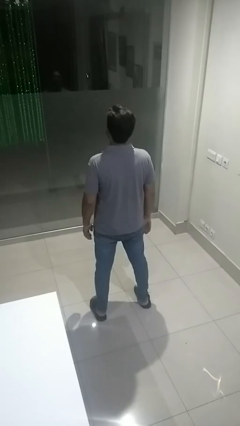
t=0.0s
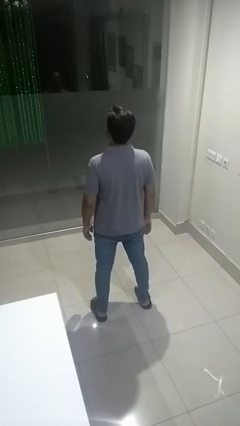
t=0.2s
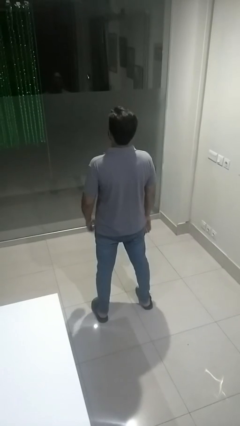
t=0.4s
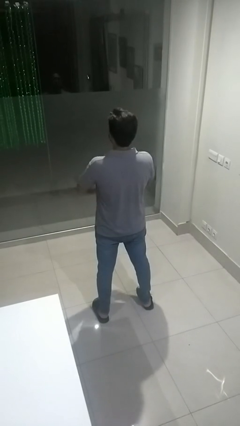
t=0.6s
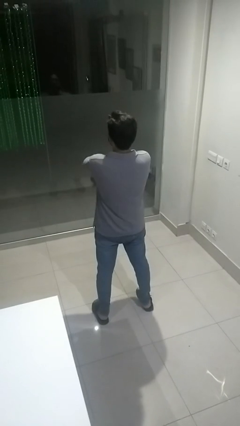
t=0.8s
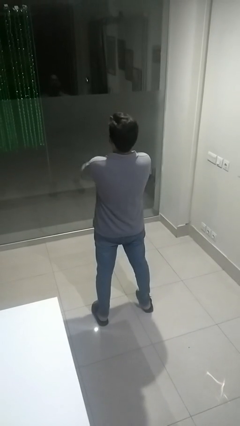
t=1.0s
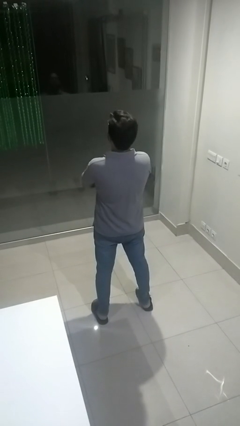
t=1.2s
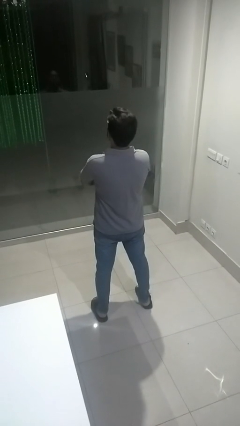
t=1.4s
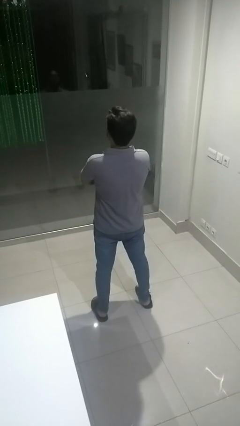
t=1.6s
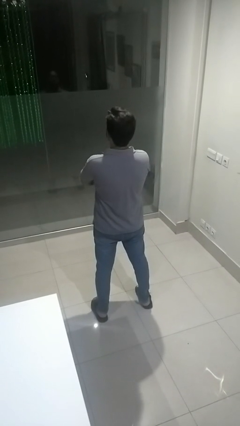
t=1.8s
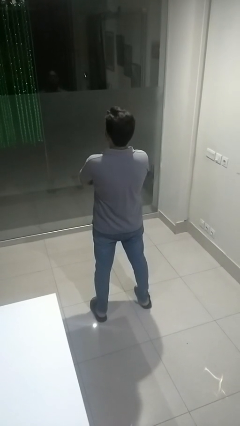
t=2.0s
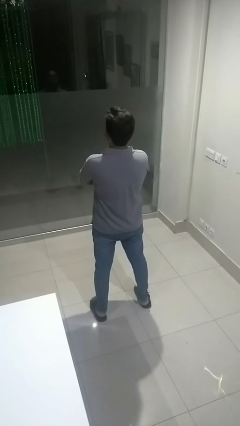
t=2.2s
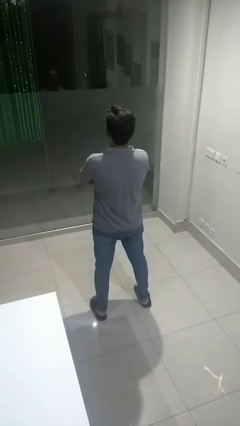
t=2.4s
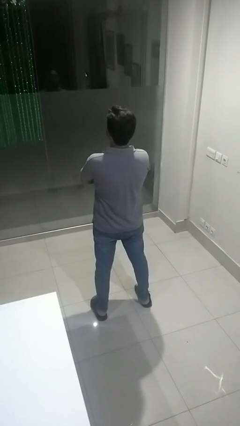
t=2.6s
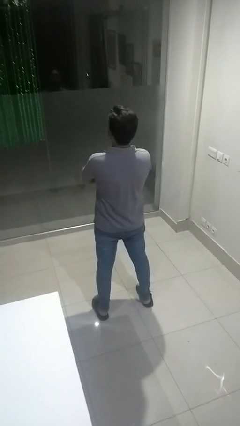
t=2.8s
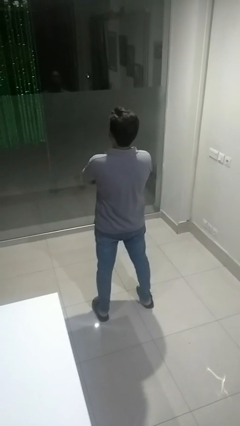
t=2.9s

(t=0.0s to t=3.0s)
person crosses arms

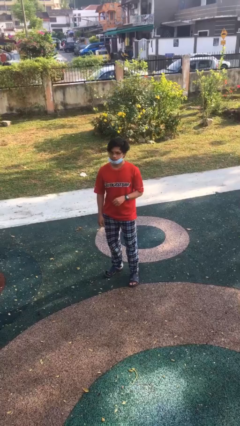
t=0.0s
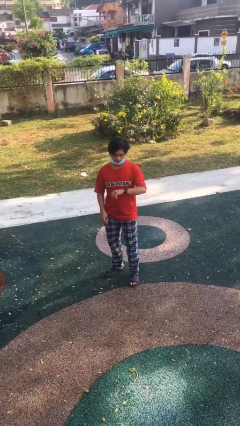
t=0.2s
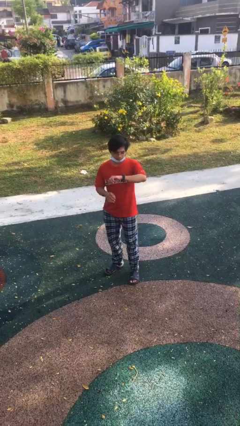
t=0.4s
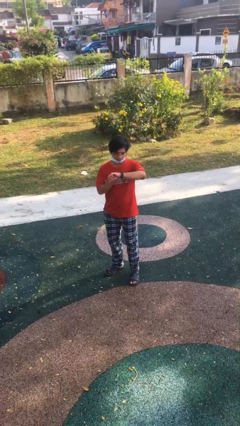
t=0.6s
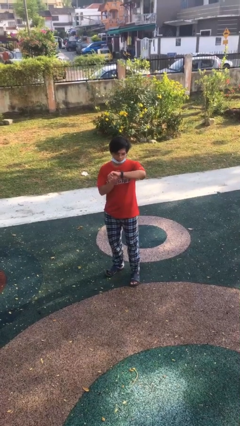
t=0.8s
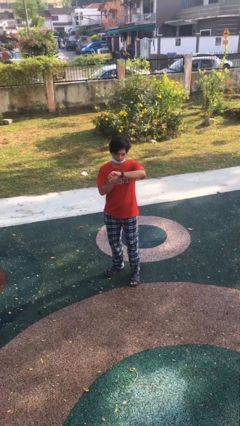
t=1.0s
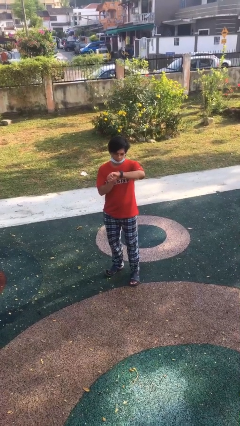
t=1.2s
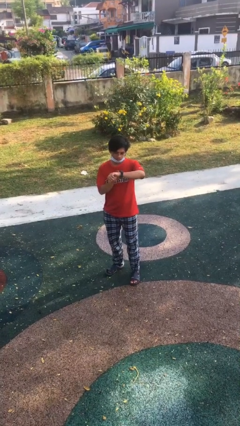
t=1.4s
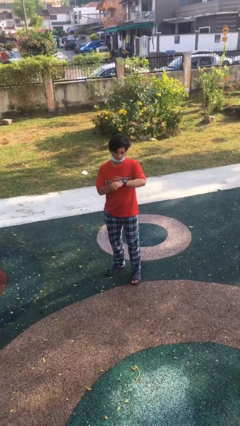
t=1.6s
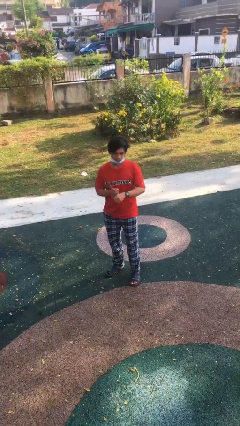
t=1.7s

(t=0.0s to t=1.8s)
person looks at wristwatch

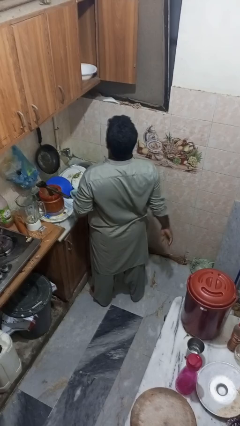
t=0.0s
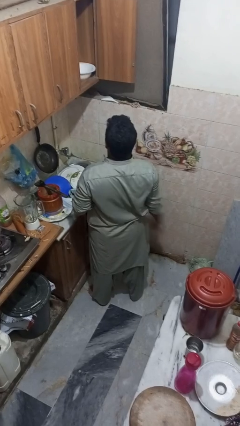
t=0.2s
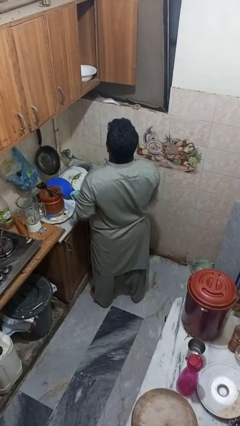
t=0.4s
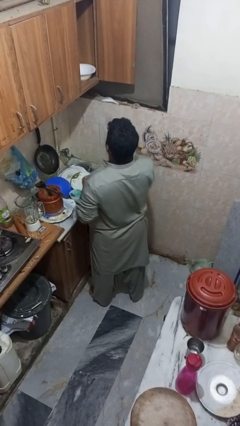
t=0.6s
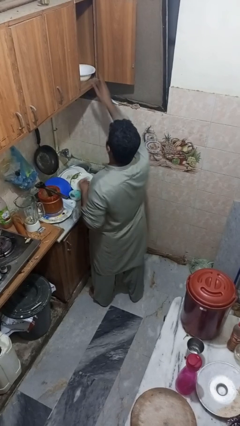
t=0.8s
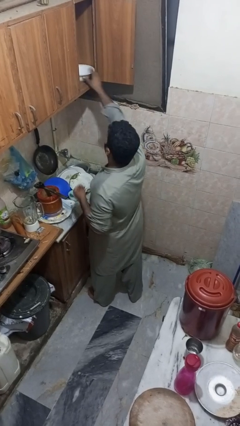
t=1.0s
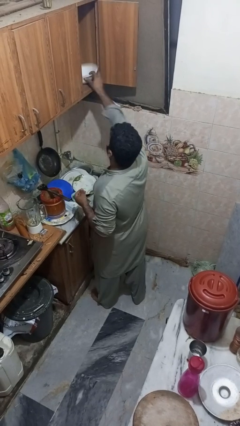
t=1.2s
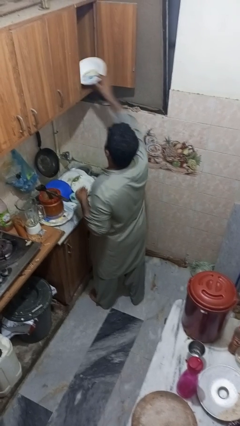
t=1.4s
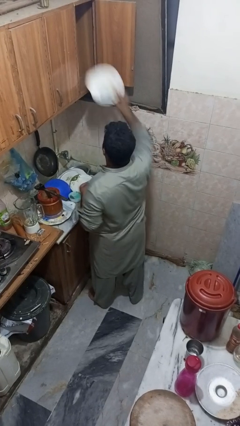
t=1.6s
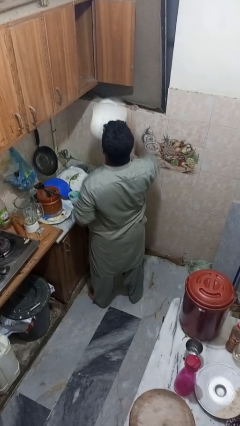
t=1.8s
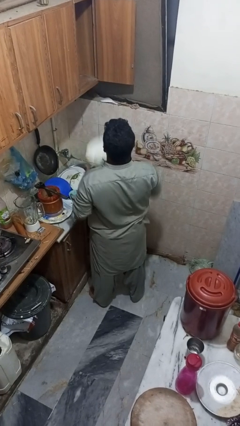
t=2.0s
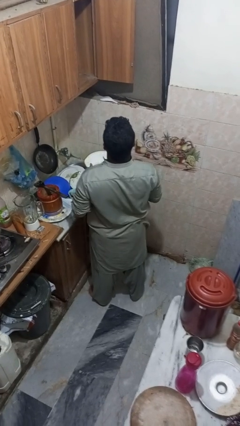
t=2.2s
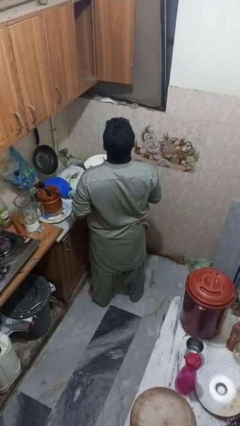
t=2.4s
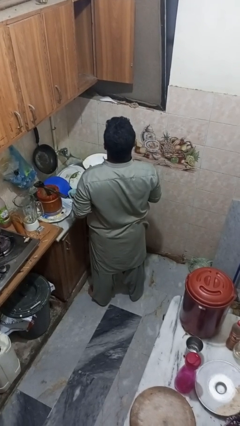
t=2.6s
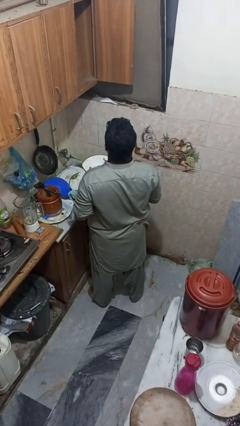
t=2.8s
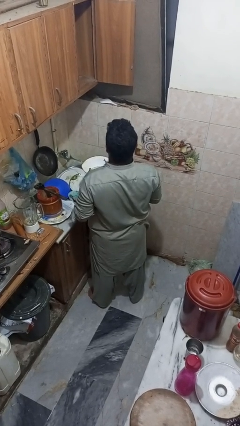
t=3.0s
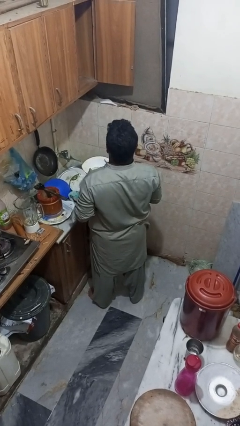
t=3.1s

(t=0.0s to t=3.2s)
person takes object from cabinet

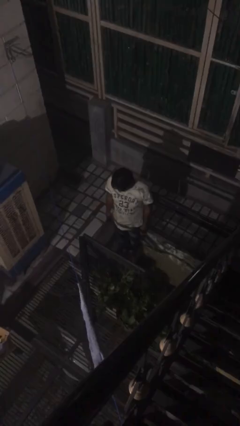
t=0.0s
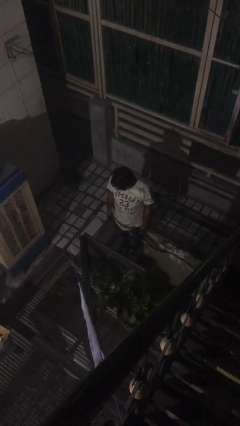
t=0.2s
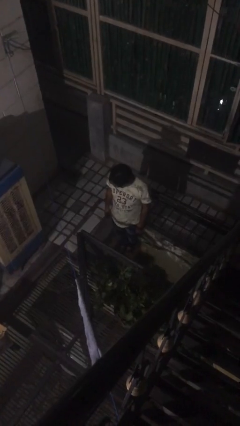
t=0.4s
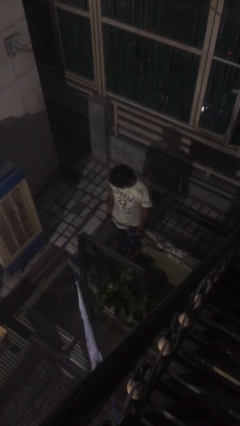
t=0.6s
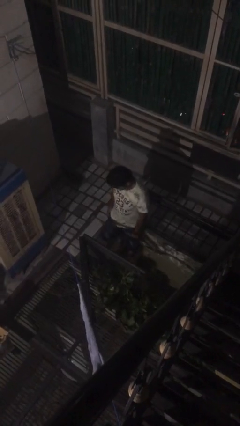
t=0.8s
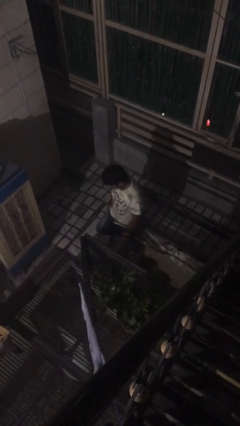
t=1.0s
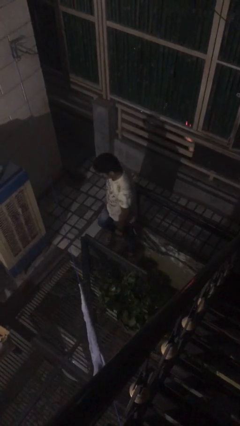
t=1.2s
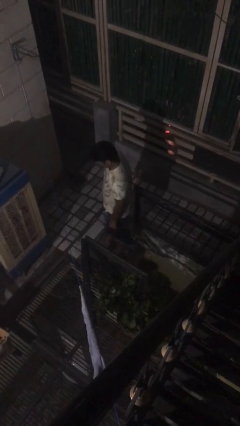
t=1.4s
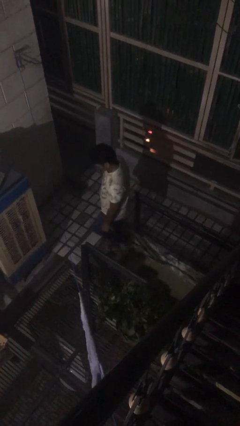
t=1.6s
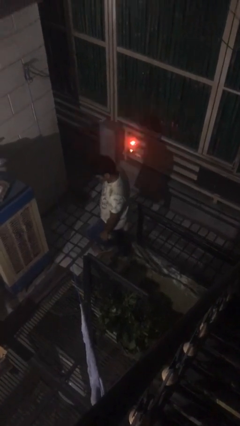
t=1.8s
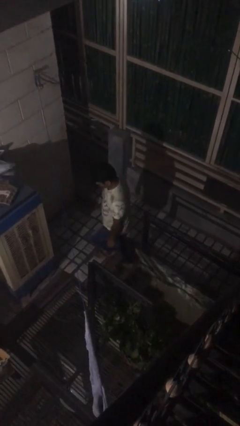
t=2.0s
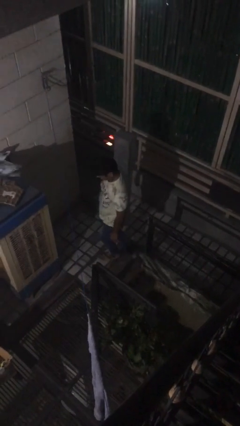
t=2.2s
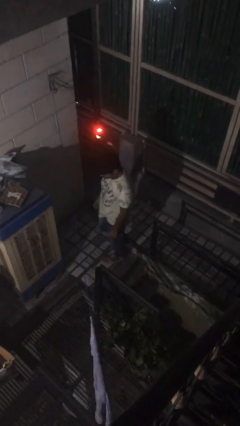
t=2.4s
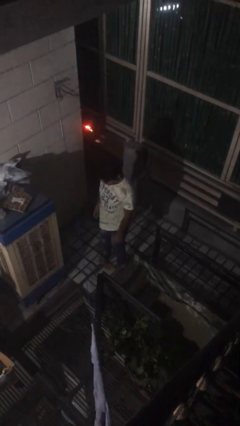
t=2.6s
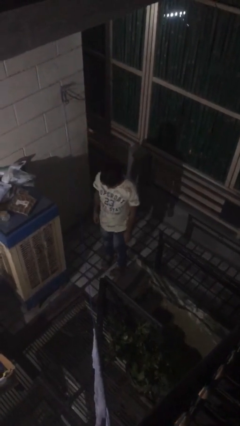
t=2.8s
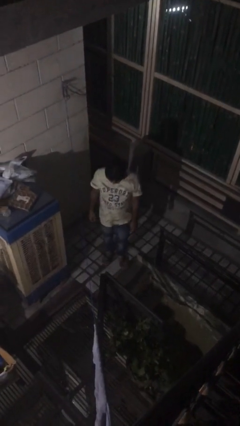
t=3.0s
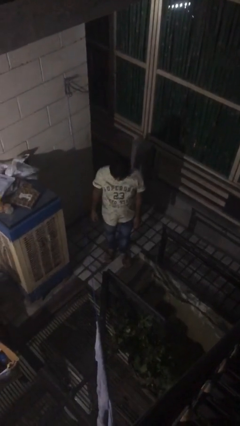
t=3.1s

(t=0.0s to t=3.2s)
person climbs up stairs

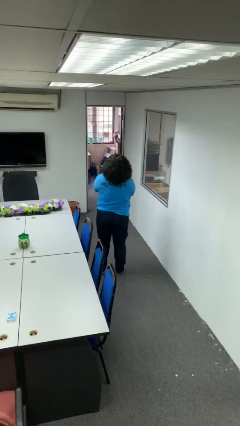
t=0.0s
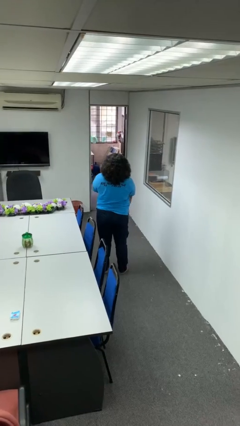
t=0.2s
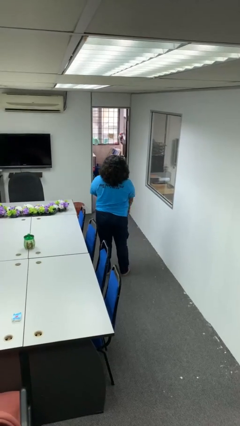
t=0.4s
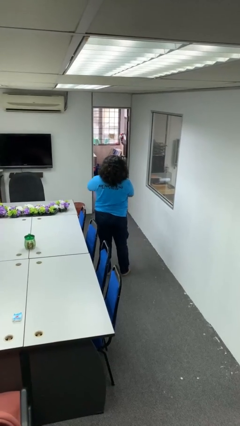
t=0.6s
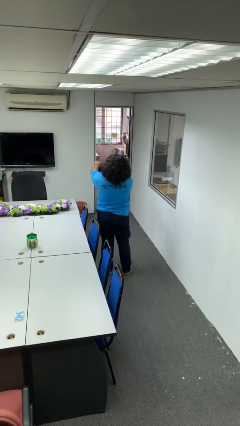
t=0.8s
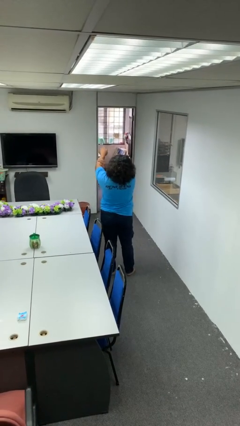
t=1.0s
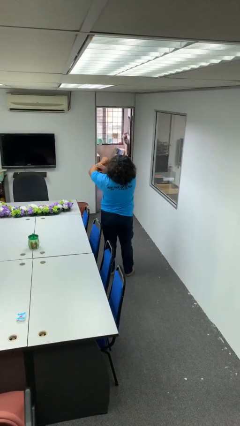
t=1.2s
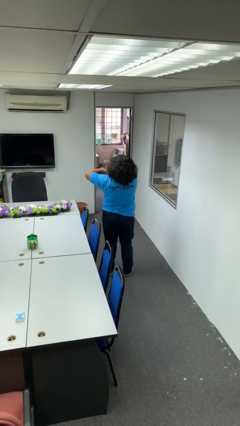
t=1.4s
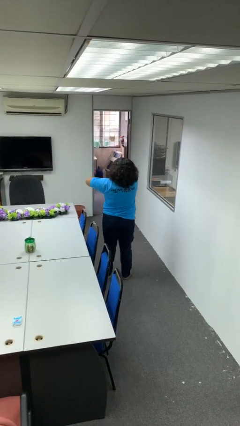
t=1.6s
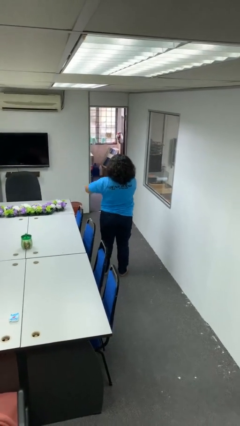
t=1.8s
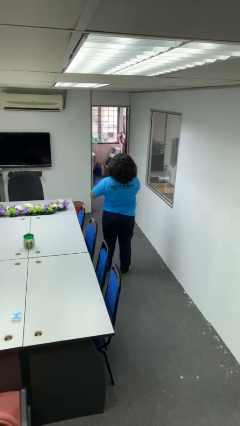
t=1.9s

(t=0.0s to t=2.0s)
person swats bug

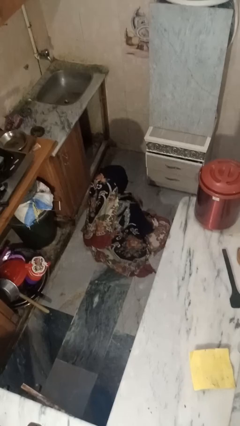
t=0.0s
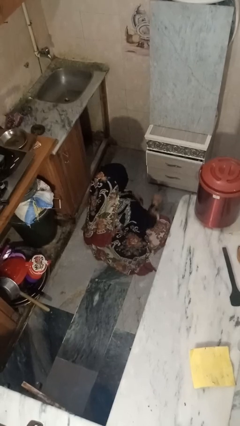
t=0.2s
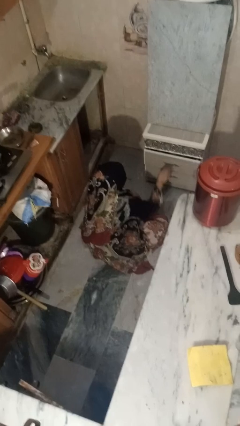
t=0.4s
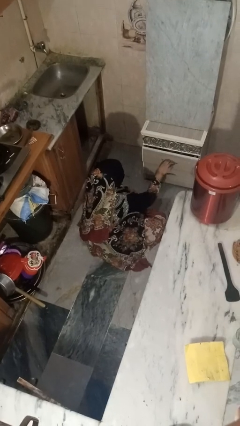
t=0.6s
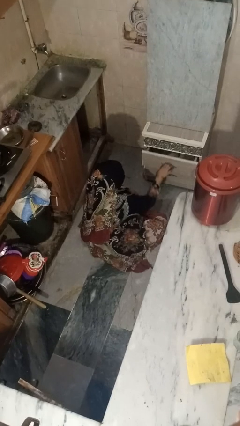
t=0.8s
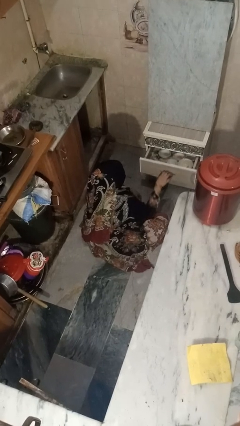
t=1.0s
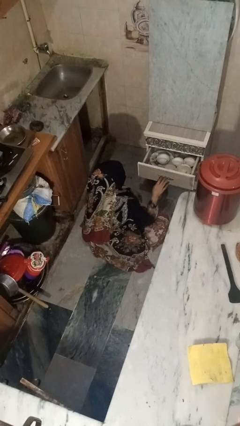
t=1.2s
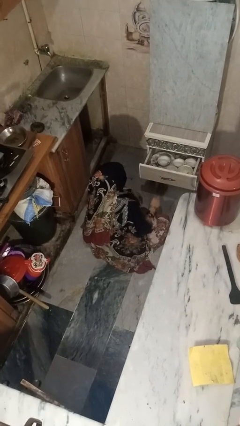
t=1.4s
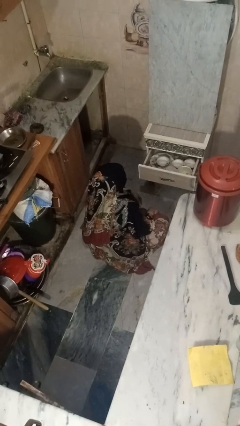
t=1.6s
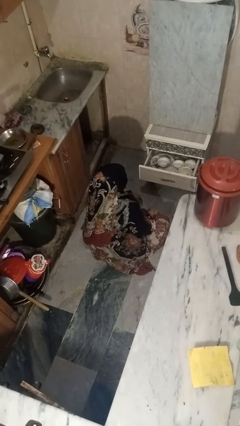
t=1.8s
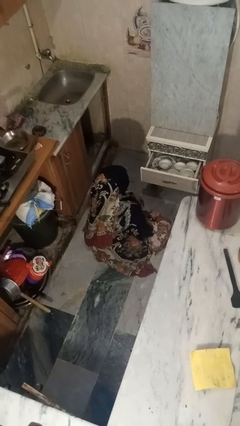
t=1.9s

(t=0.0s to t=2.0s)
person opens kitchen drawer

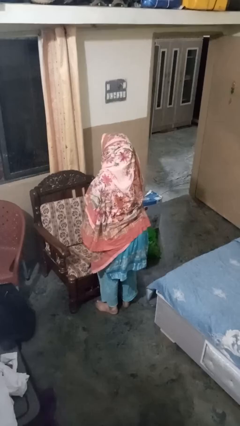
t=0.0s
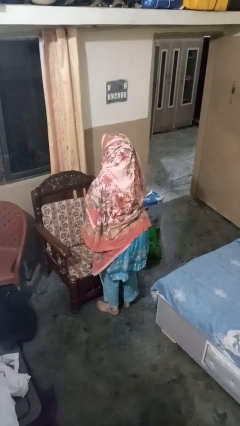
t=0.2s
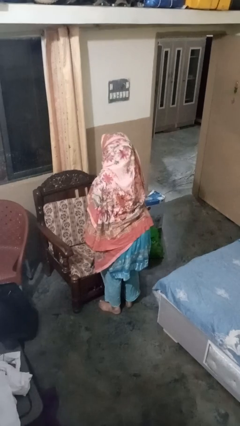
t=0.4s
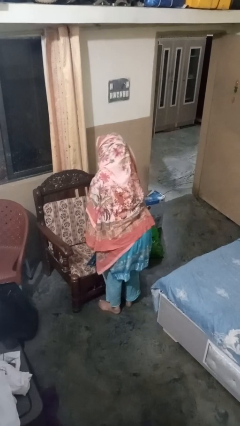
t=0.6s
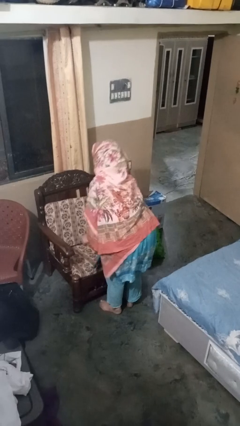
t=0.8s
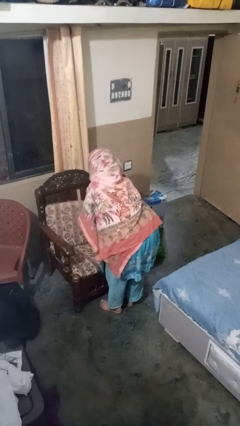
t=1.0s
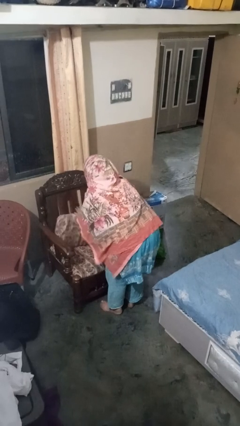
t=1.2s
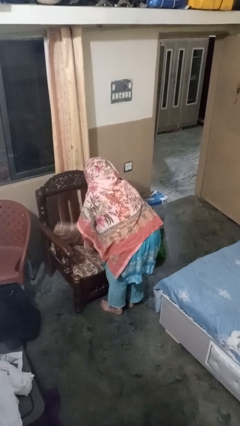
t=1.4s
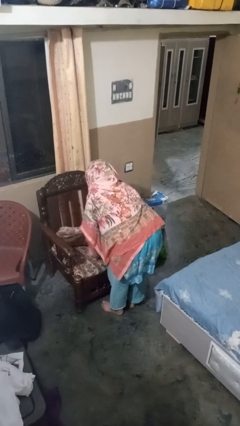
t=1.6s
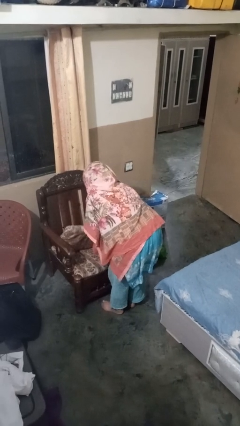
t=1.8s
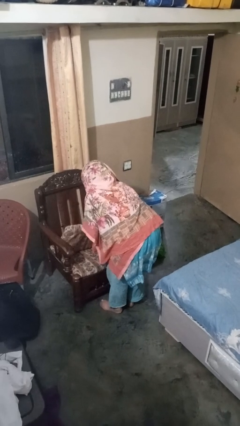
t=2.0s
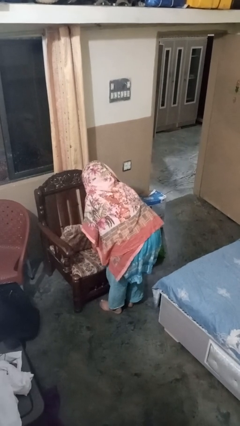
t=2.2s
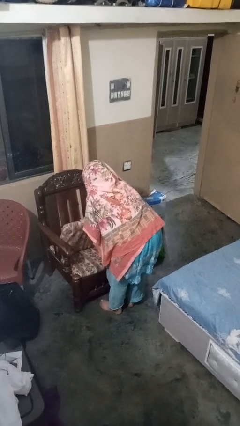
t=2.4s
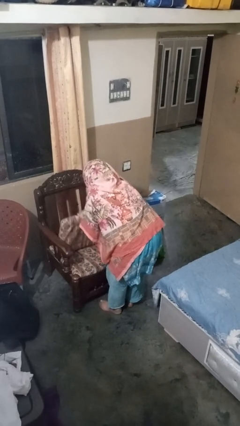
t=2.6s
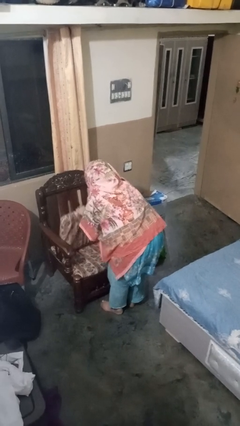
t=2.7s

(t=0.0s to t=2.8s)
person searches in couch
